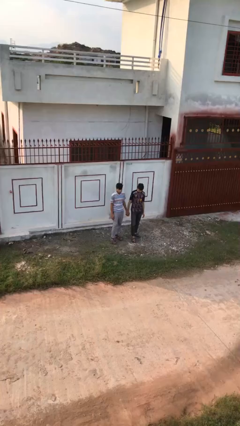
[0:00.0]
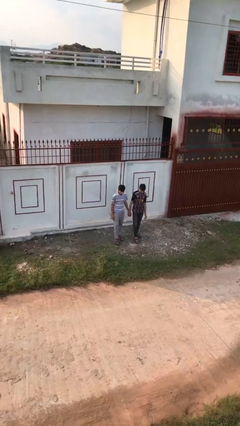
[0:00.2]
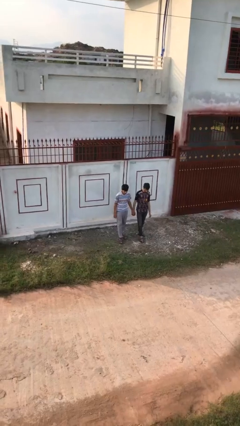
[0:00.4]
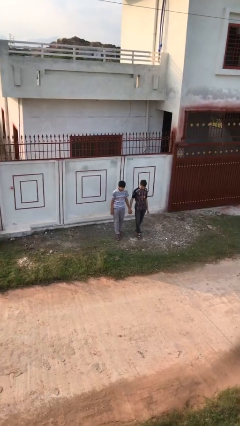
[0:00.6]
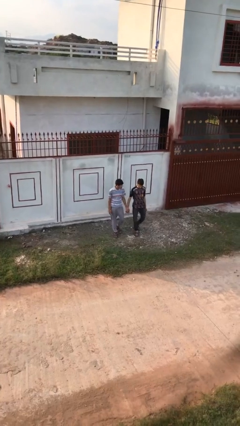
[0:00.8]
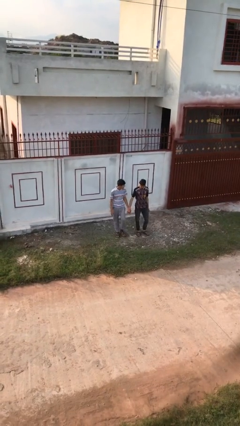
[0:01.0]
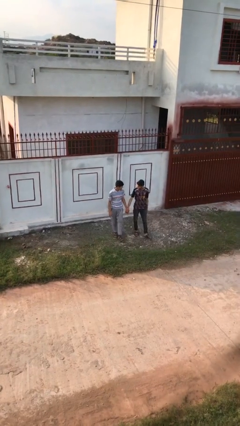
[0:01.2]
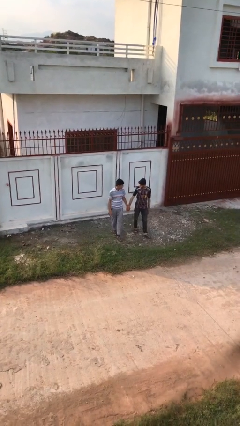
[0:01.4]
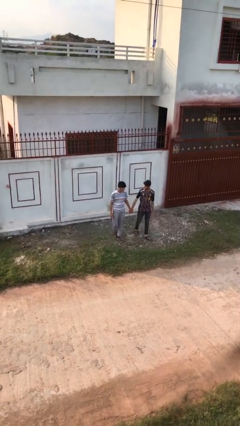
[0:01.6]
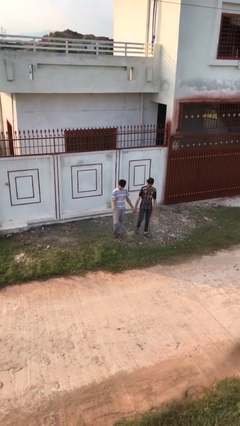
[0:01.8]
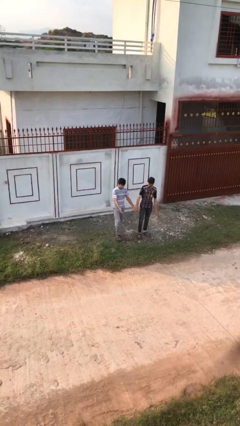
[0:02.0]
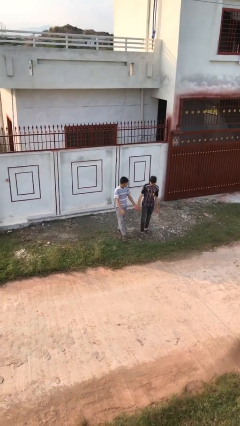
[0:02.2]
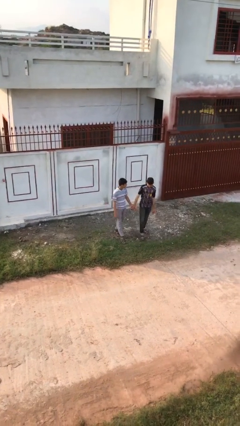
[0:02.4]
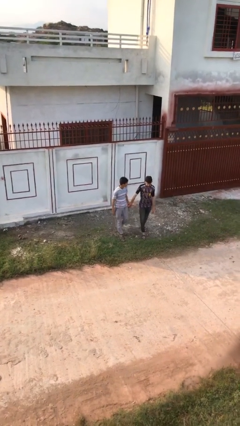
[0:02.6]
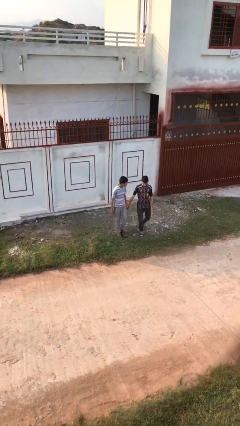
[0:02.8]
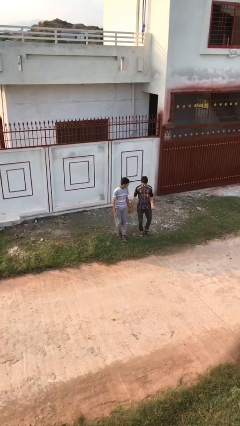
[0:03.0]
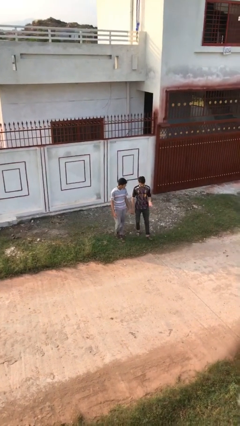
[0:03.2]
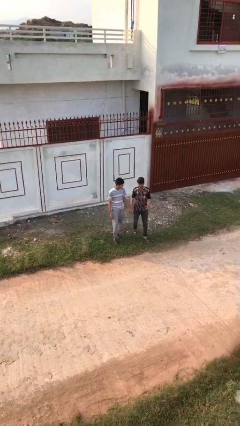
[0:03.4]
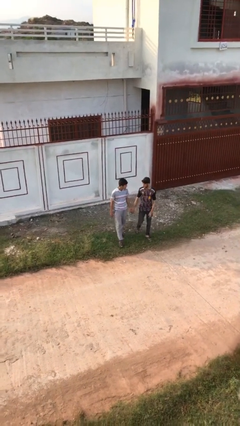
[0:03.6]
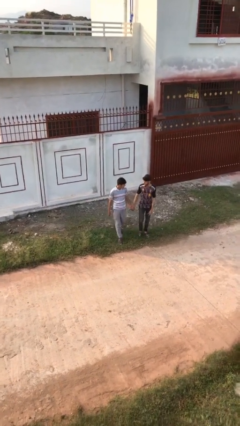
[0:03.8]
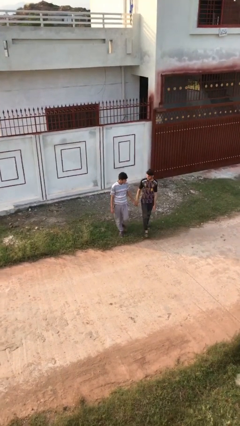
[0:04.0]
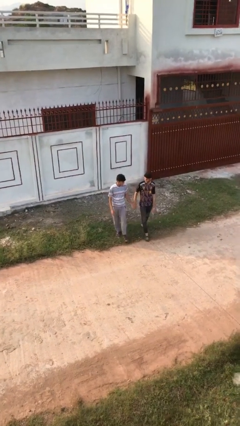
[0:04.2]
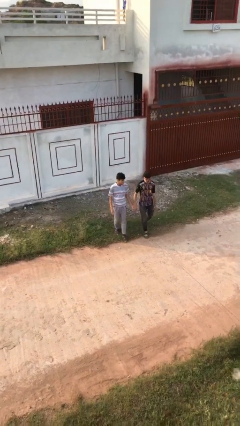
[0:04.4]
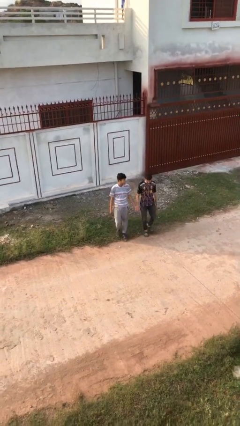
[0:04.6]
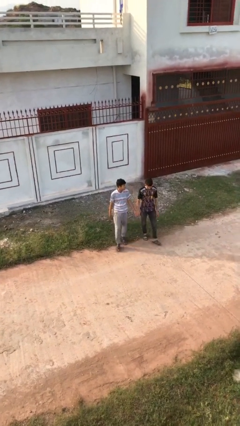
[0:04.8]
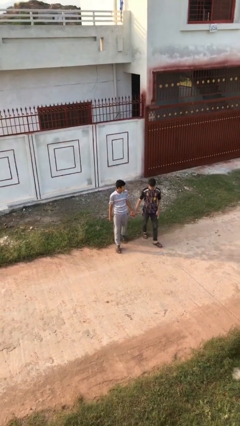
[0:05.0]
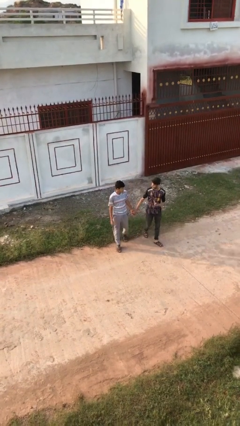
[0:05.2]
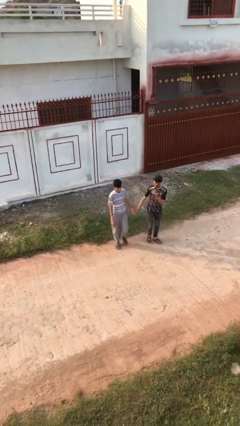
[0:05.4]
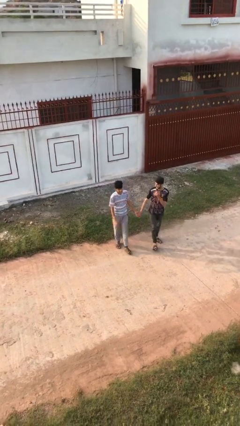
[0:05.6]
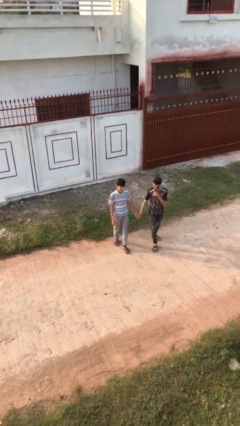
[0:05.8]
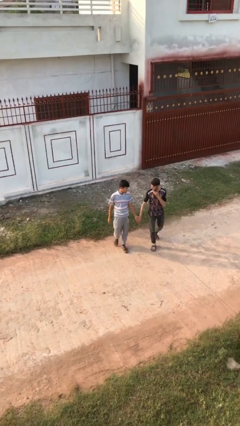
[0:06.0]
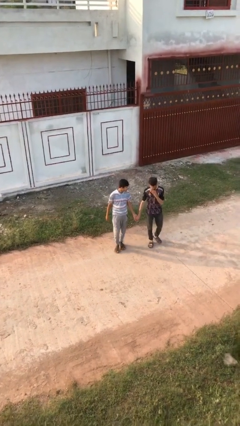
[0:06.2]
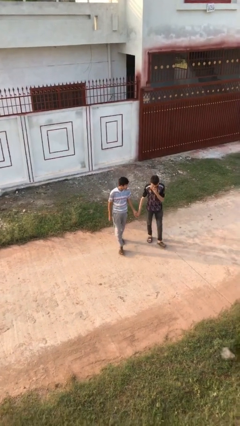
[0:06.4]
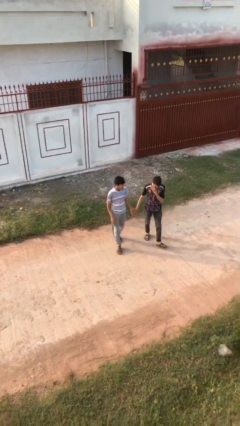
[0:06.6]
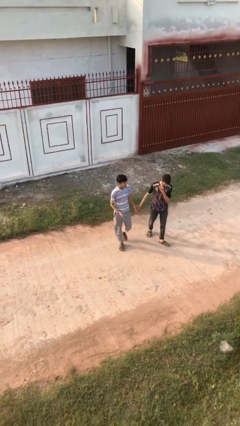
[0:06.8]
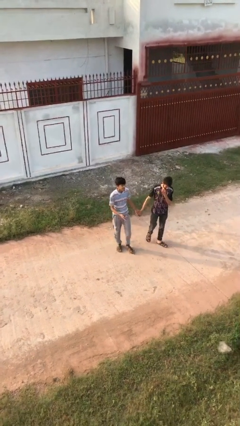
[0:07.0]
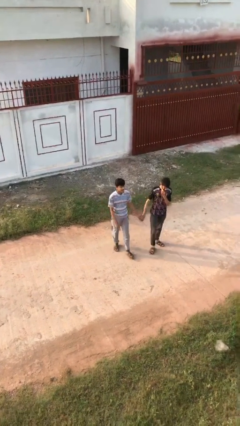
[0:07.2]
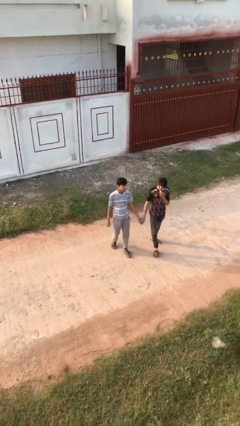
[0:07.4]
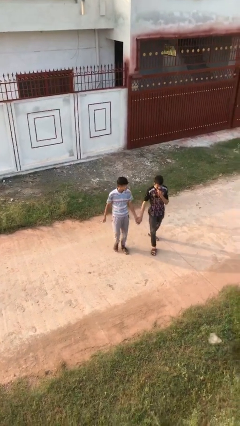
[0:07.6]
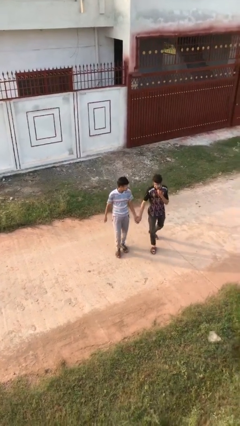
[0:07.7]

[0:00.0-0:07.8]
person holds hand

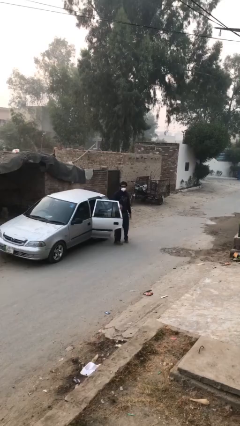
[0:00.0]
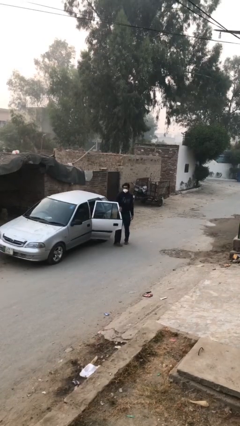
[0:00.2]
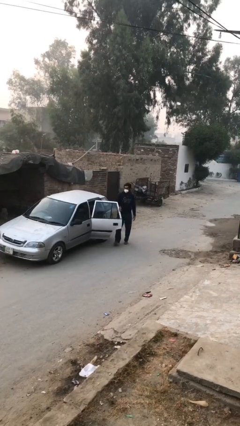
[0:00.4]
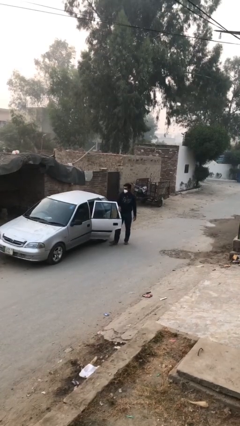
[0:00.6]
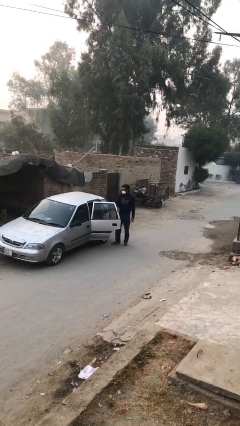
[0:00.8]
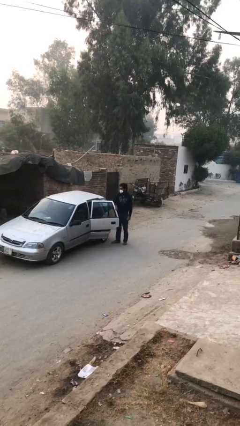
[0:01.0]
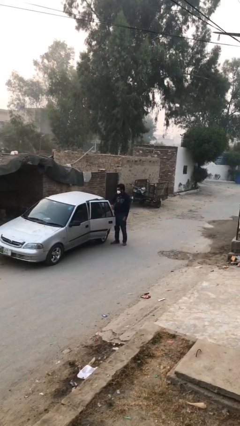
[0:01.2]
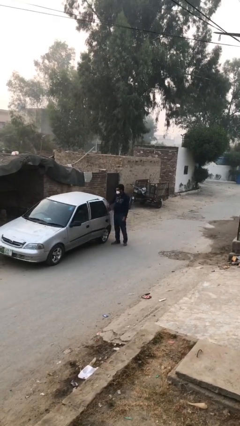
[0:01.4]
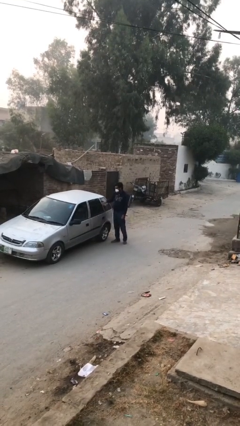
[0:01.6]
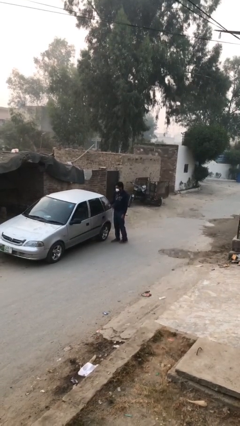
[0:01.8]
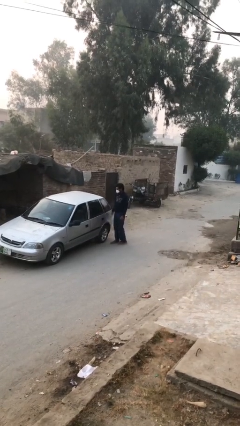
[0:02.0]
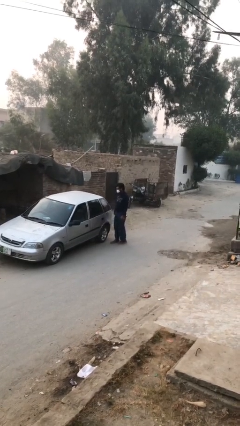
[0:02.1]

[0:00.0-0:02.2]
person closes car door

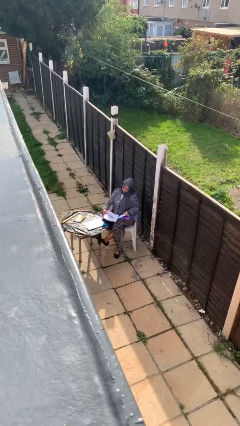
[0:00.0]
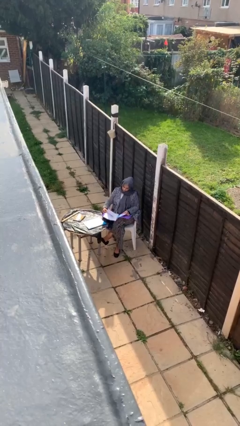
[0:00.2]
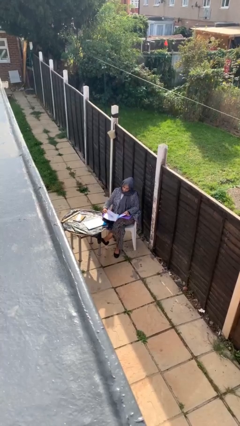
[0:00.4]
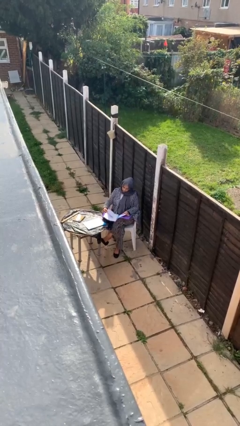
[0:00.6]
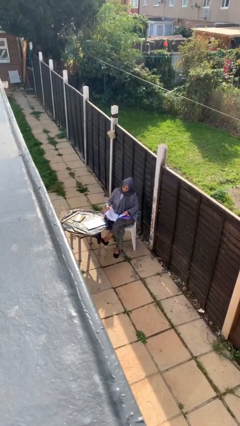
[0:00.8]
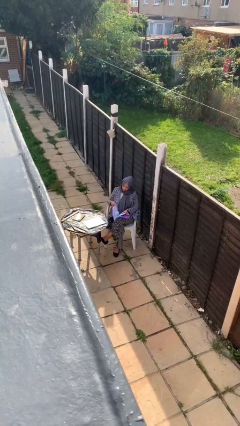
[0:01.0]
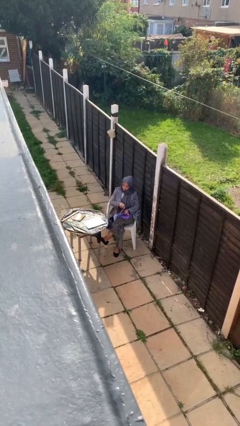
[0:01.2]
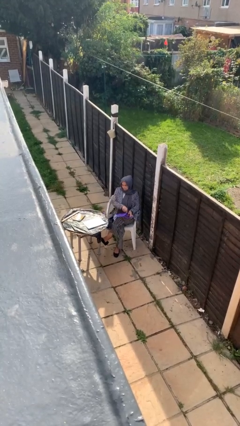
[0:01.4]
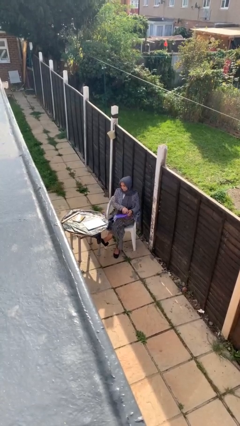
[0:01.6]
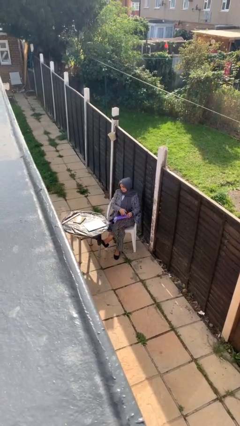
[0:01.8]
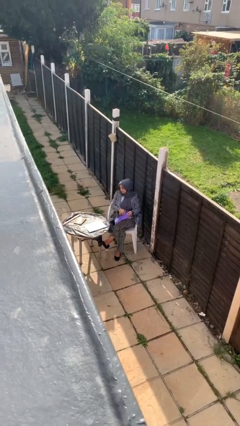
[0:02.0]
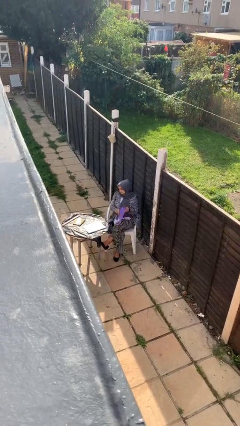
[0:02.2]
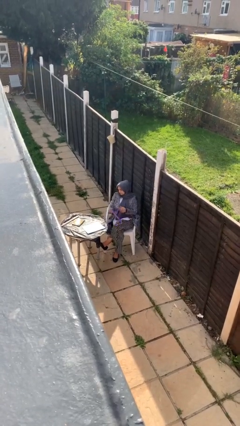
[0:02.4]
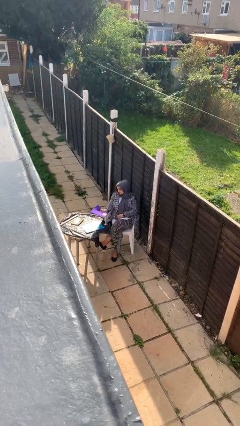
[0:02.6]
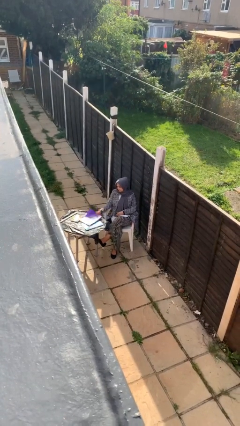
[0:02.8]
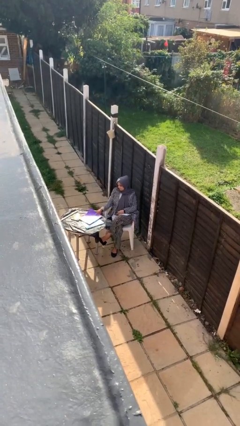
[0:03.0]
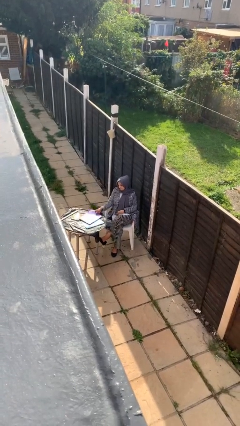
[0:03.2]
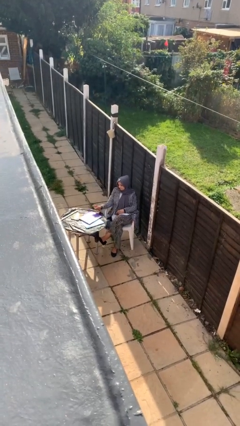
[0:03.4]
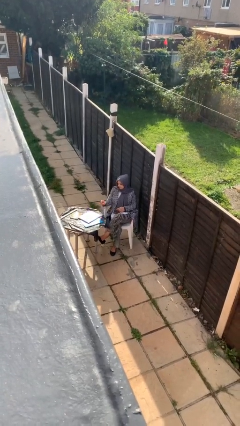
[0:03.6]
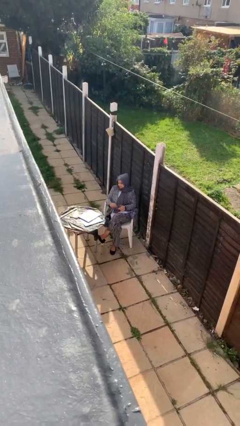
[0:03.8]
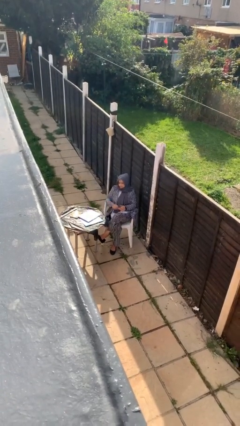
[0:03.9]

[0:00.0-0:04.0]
person puts down object on table

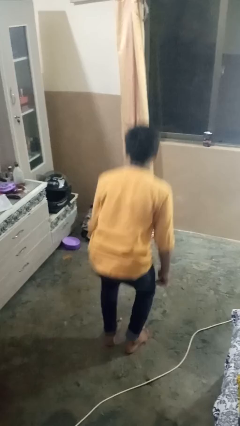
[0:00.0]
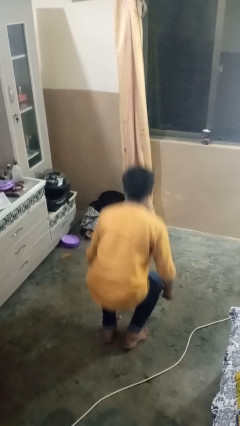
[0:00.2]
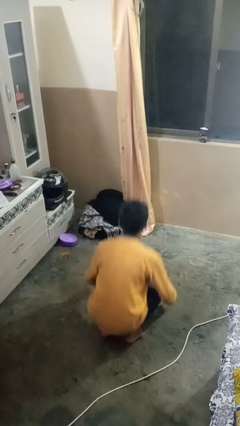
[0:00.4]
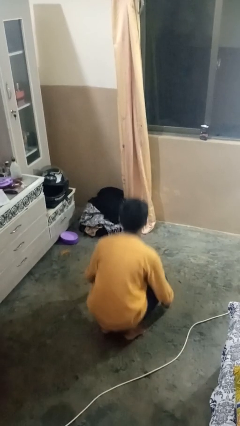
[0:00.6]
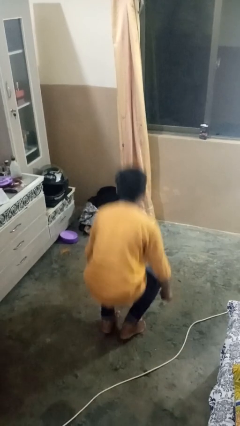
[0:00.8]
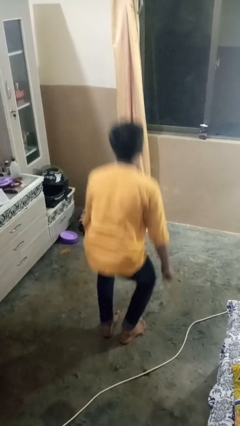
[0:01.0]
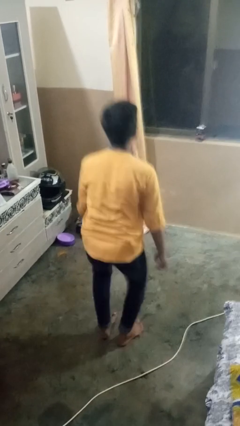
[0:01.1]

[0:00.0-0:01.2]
person exercises with situp

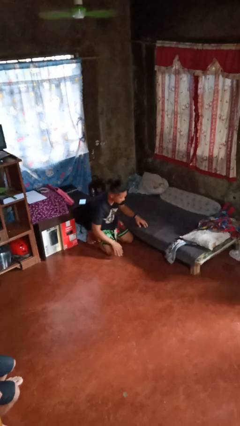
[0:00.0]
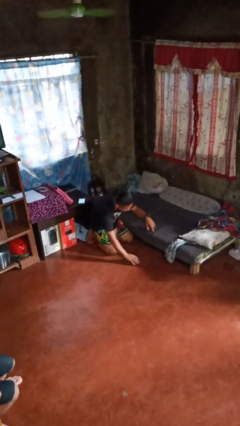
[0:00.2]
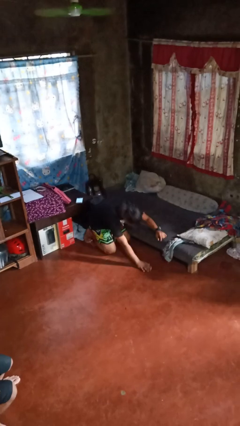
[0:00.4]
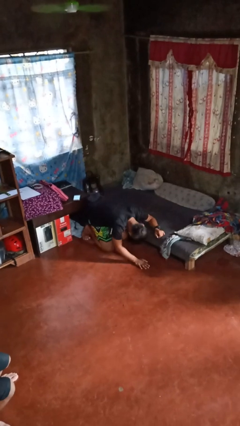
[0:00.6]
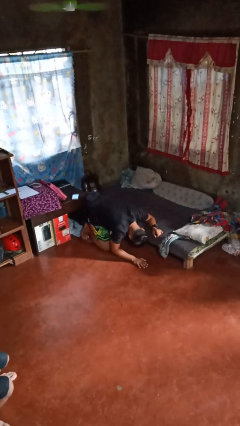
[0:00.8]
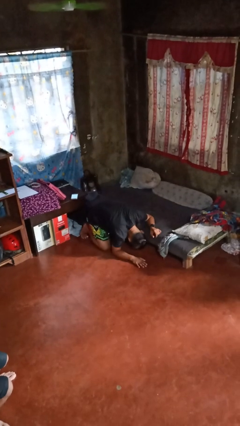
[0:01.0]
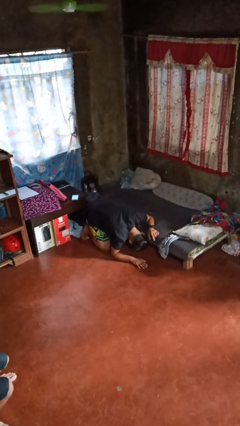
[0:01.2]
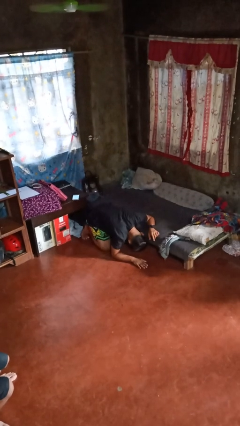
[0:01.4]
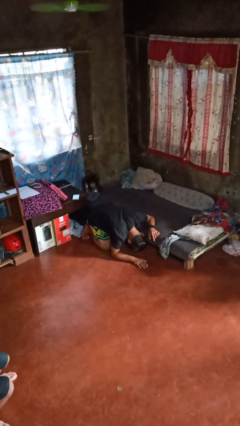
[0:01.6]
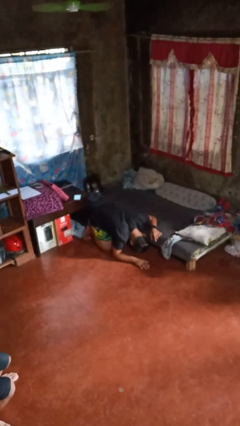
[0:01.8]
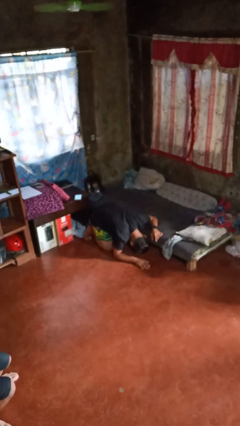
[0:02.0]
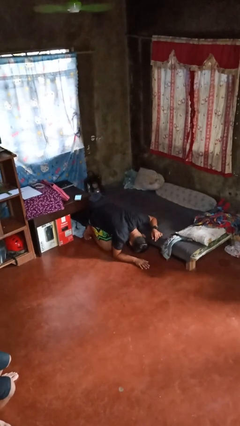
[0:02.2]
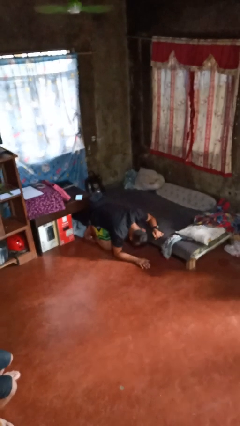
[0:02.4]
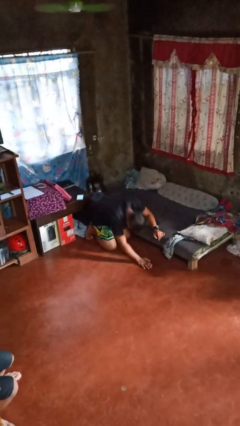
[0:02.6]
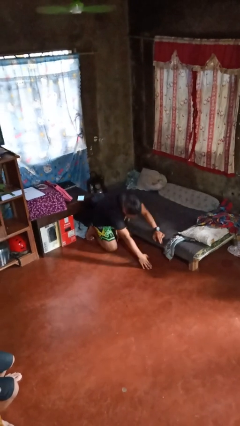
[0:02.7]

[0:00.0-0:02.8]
person searches under bed
